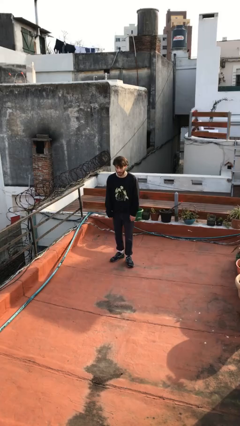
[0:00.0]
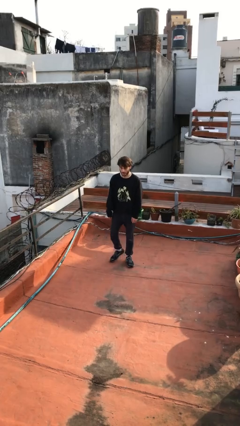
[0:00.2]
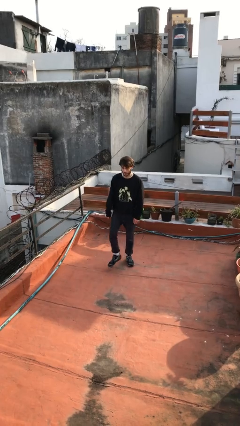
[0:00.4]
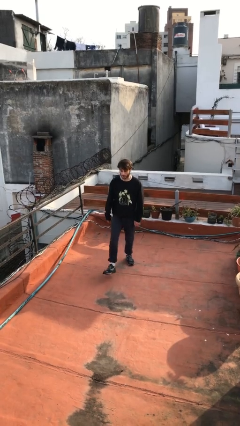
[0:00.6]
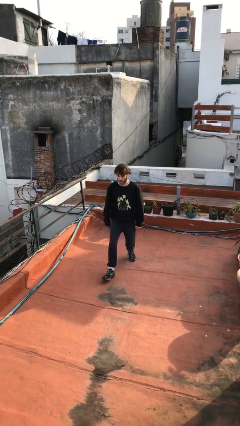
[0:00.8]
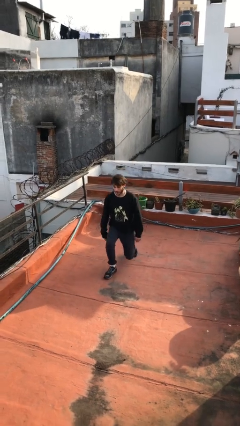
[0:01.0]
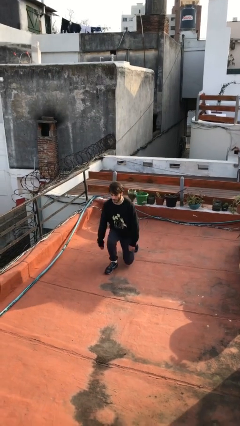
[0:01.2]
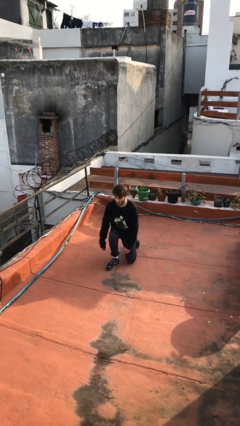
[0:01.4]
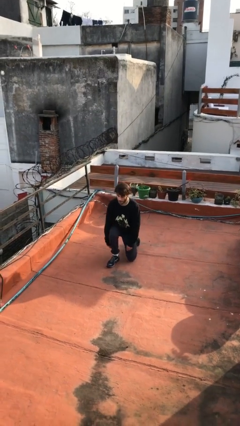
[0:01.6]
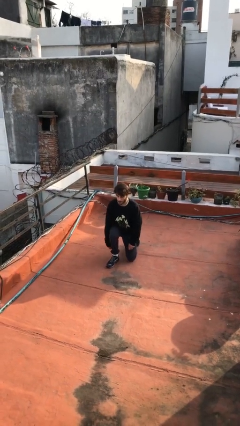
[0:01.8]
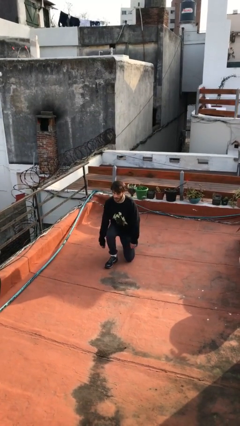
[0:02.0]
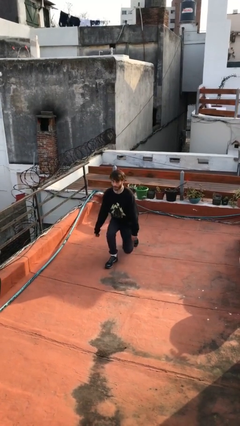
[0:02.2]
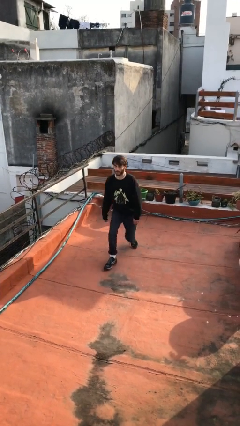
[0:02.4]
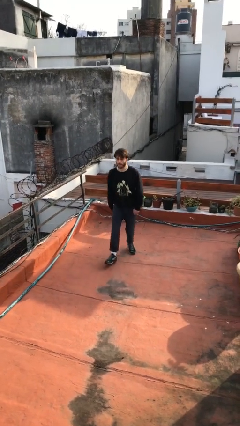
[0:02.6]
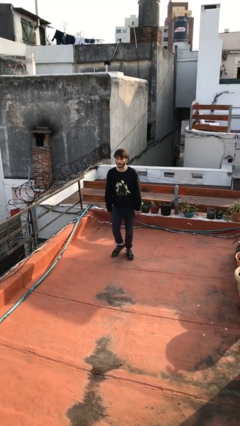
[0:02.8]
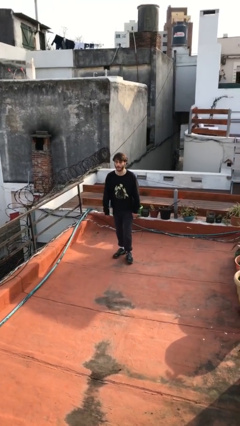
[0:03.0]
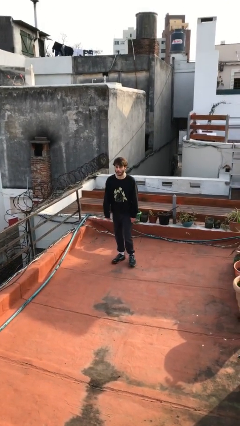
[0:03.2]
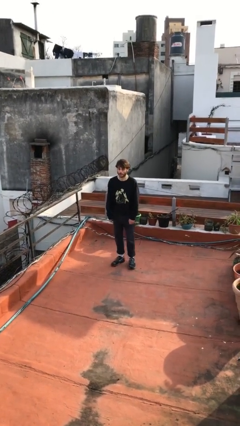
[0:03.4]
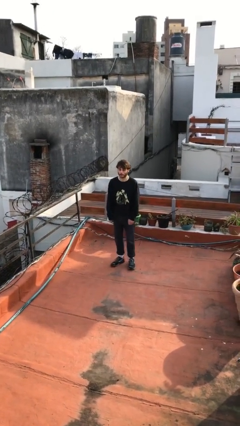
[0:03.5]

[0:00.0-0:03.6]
person exercises with lunges

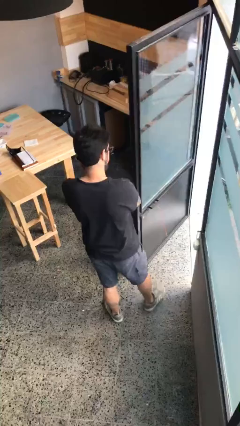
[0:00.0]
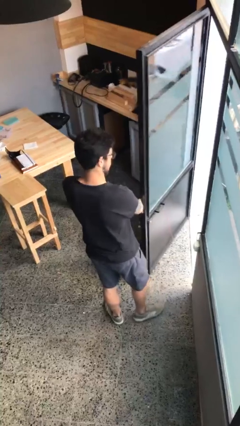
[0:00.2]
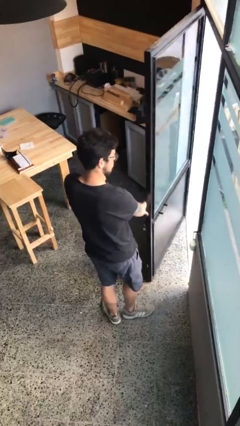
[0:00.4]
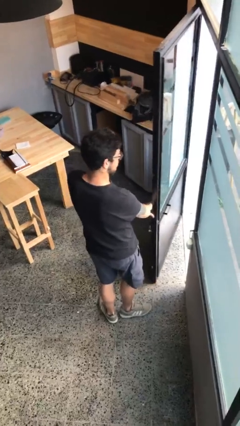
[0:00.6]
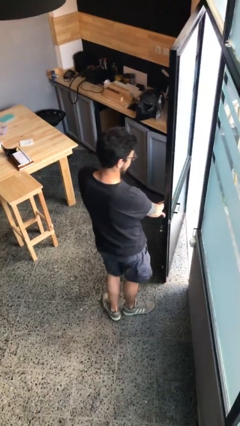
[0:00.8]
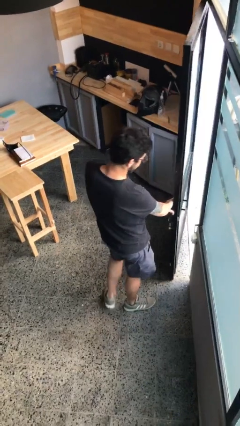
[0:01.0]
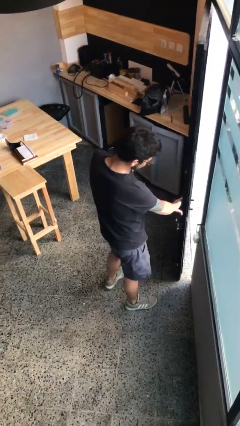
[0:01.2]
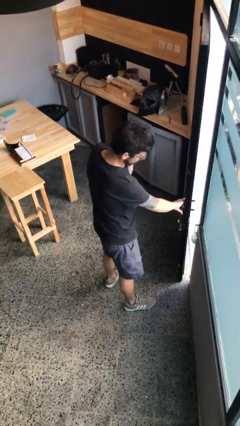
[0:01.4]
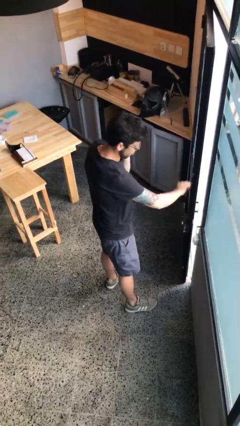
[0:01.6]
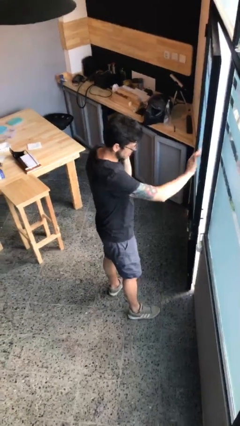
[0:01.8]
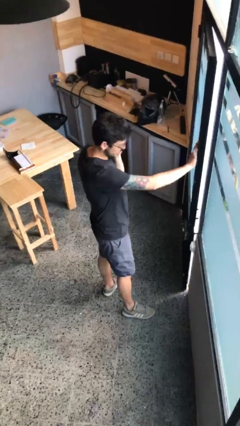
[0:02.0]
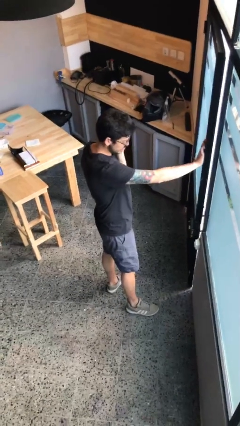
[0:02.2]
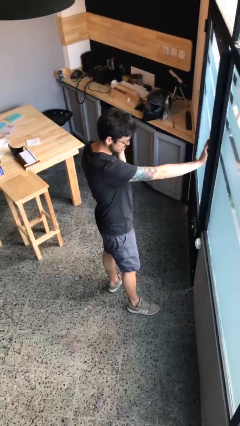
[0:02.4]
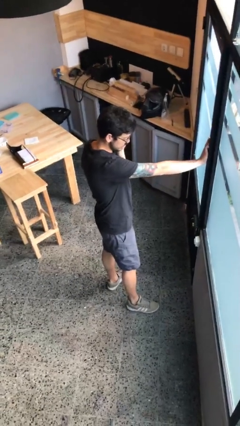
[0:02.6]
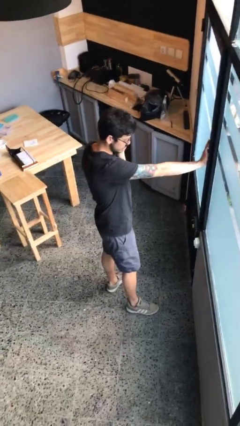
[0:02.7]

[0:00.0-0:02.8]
person closes facility door

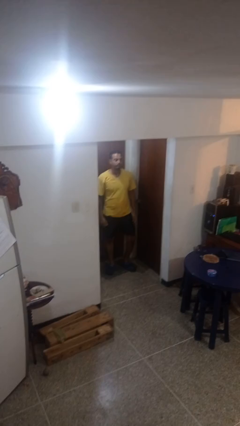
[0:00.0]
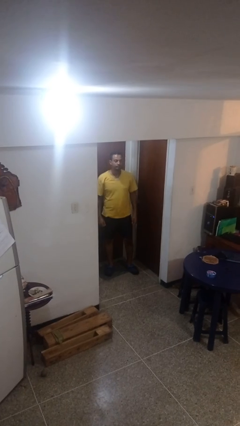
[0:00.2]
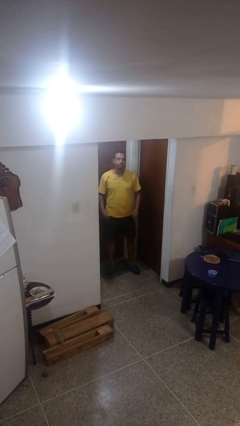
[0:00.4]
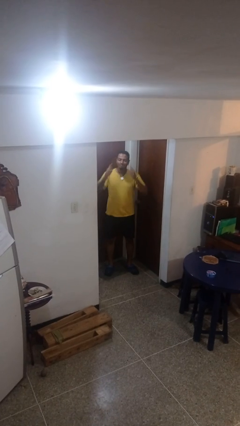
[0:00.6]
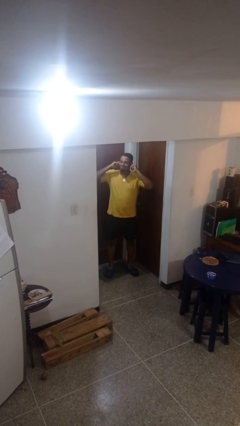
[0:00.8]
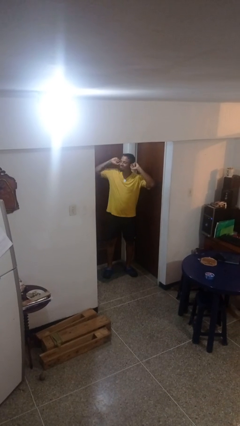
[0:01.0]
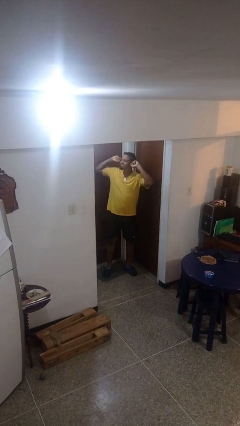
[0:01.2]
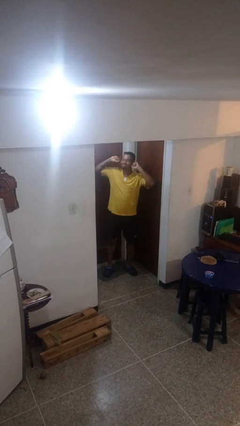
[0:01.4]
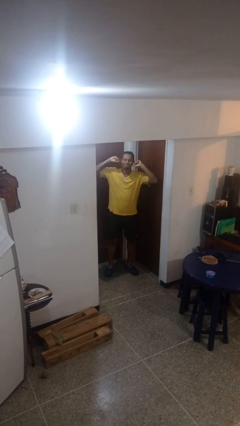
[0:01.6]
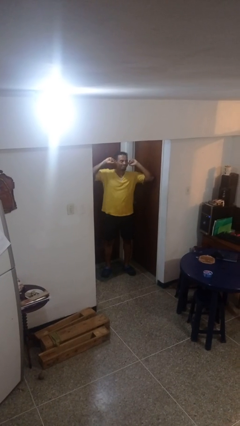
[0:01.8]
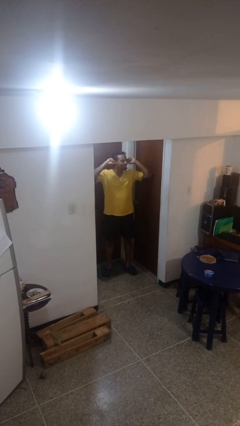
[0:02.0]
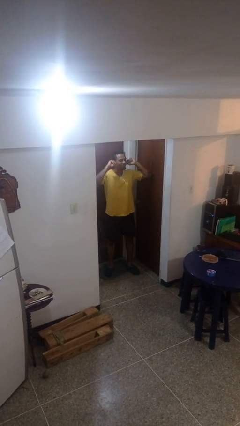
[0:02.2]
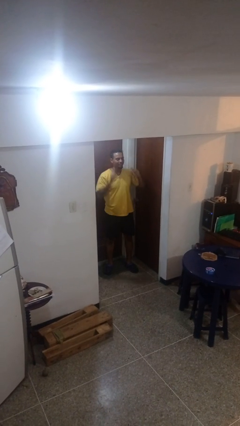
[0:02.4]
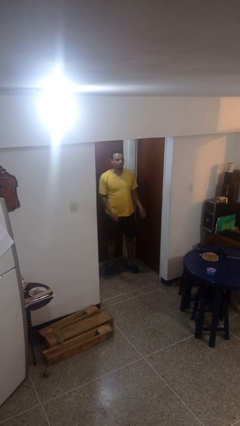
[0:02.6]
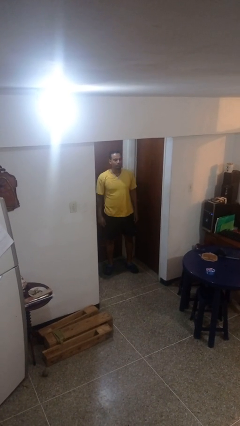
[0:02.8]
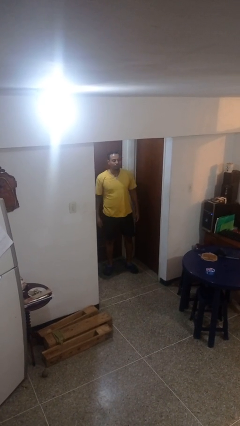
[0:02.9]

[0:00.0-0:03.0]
person puts fingers in ear

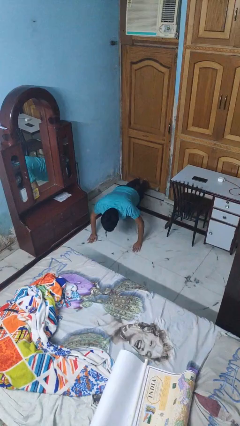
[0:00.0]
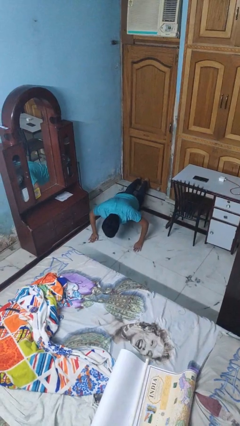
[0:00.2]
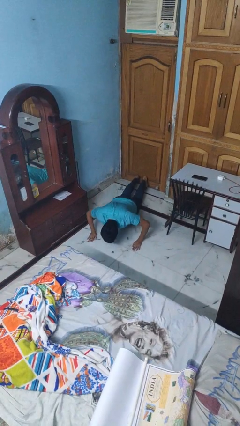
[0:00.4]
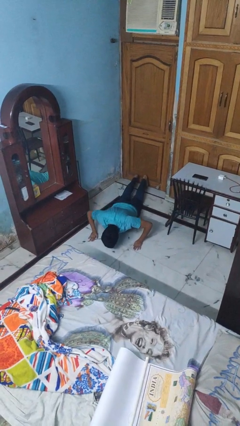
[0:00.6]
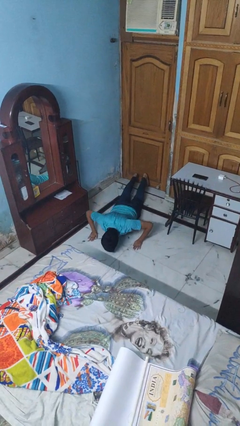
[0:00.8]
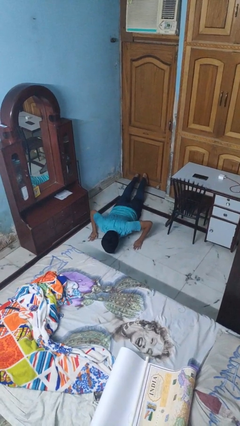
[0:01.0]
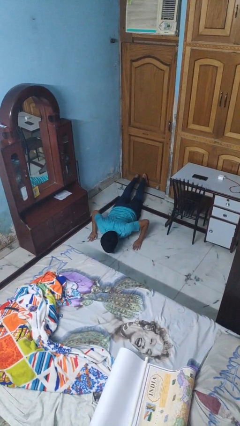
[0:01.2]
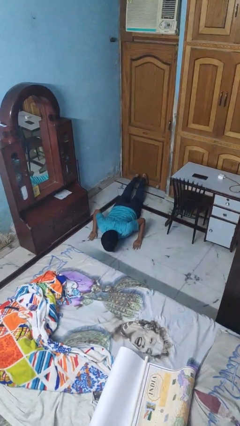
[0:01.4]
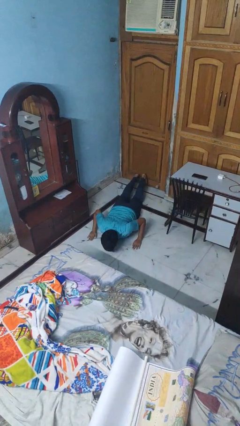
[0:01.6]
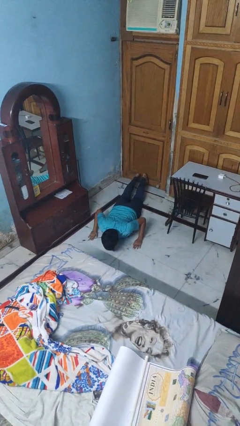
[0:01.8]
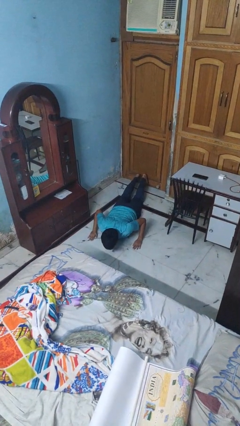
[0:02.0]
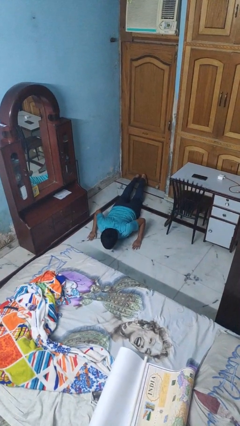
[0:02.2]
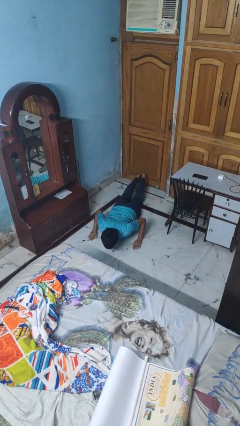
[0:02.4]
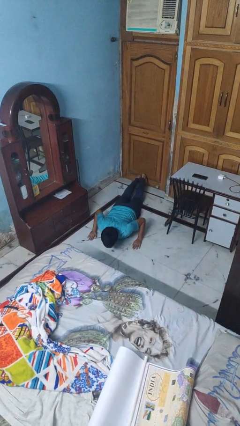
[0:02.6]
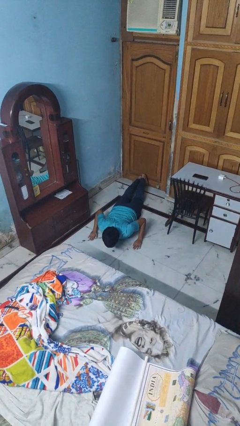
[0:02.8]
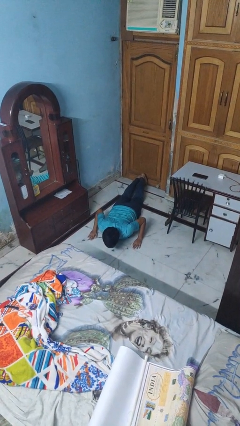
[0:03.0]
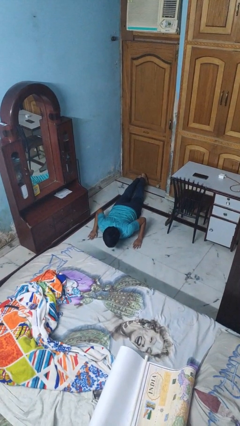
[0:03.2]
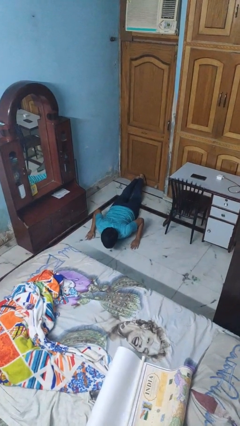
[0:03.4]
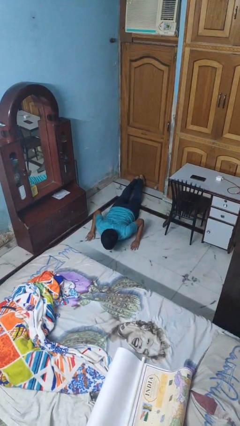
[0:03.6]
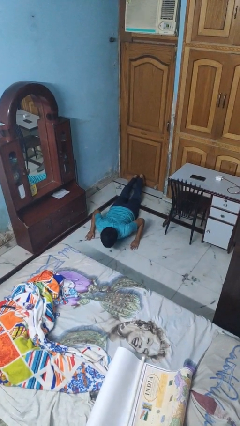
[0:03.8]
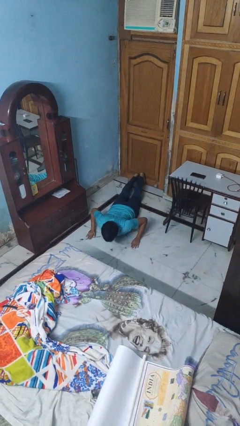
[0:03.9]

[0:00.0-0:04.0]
person exercises with pushup

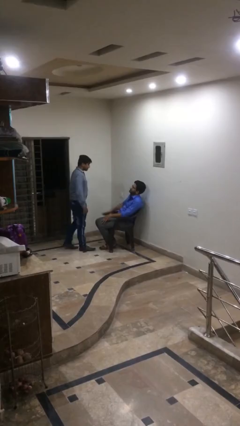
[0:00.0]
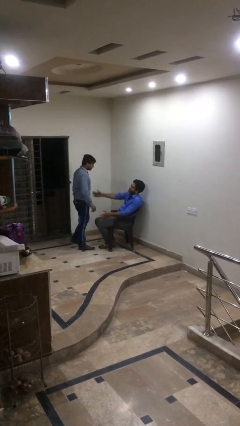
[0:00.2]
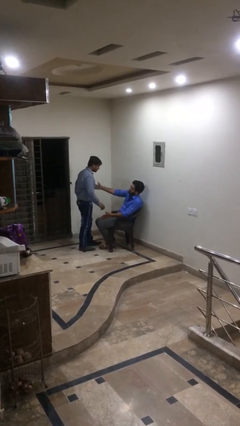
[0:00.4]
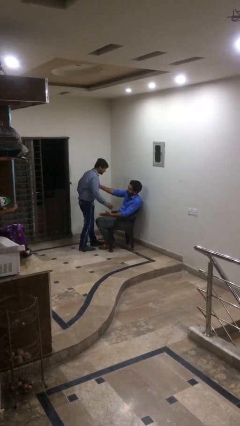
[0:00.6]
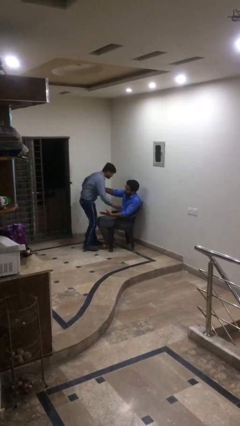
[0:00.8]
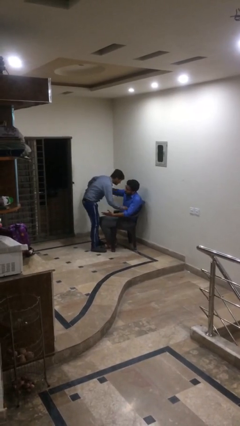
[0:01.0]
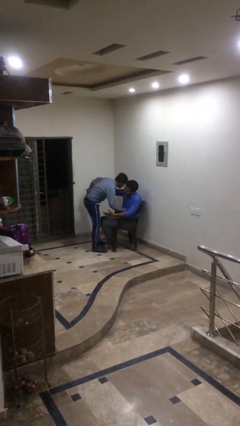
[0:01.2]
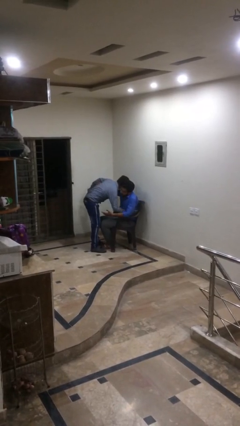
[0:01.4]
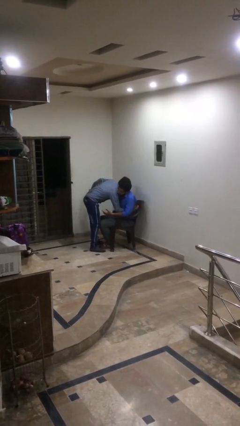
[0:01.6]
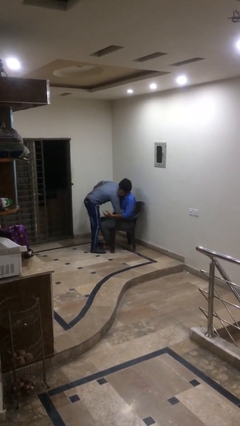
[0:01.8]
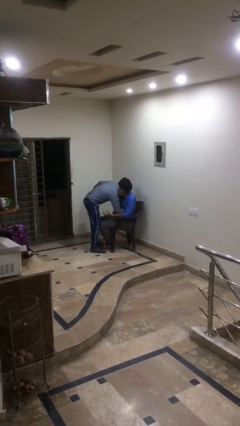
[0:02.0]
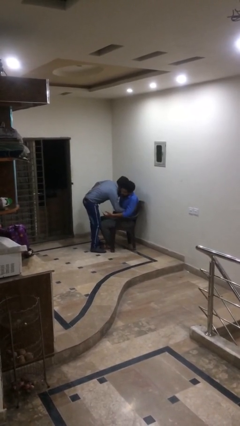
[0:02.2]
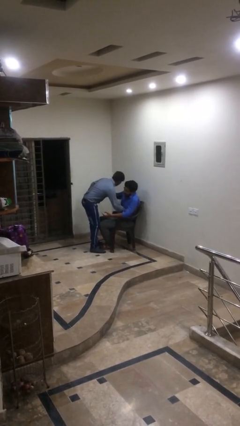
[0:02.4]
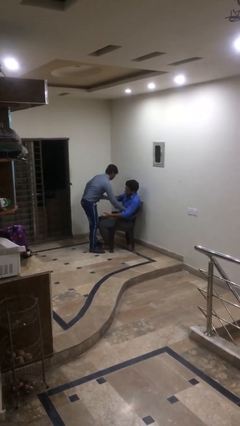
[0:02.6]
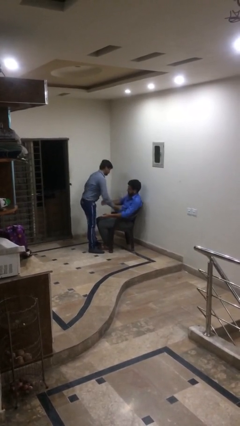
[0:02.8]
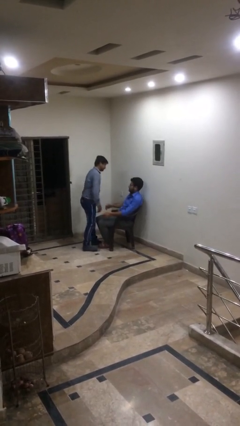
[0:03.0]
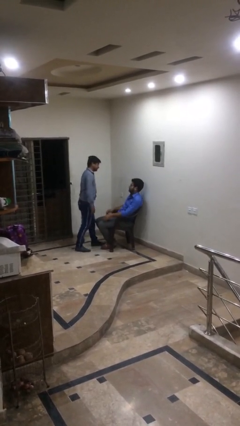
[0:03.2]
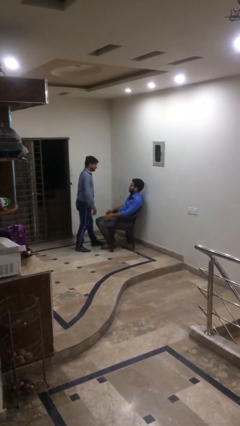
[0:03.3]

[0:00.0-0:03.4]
person embraces person

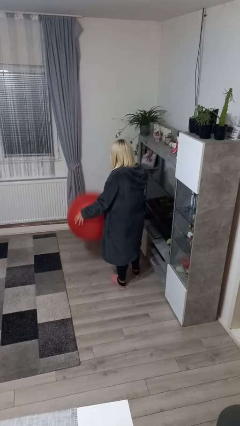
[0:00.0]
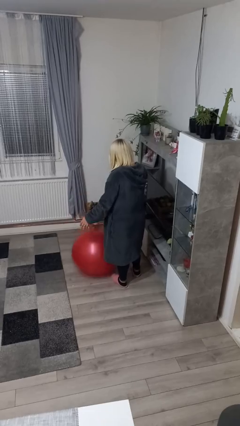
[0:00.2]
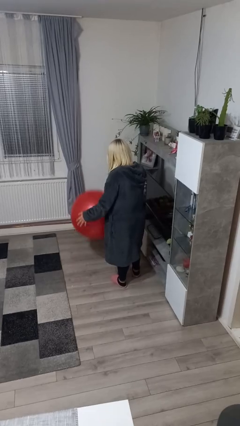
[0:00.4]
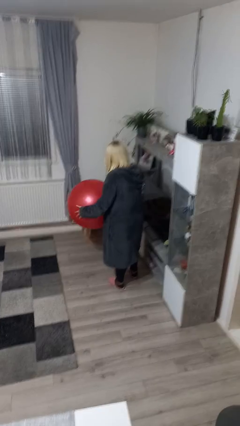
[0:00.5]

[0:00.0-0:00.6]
person bounces ball on floor
